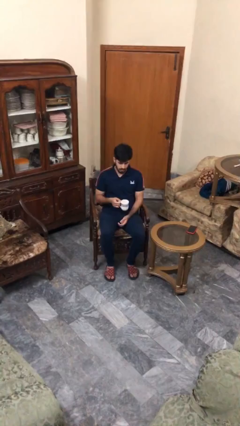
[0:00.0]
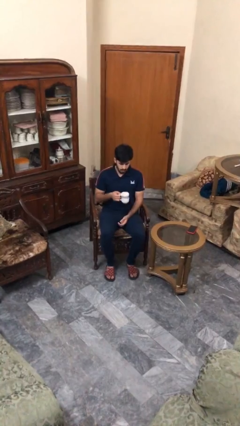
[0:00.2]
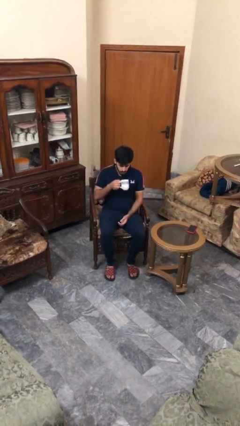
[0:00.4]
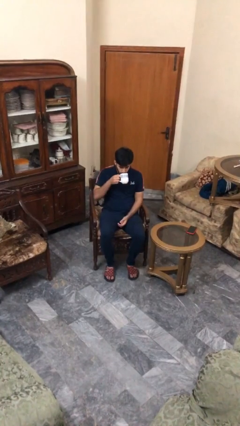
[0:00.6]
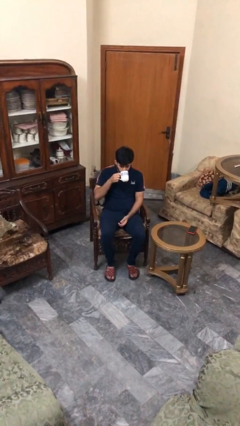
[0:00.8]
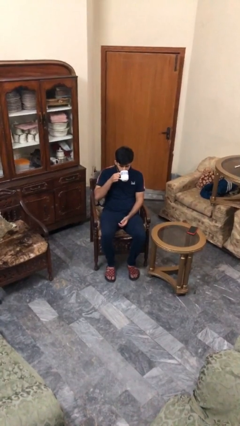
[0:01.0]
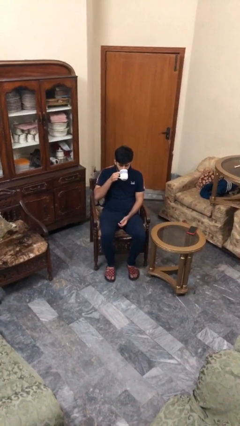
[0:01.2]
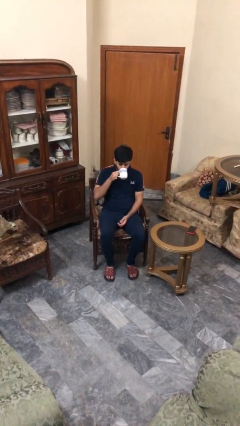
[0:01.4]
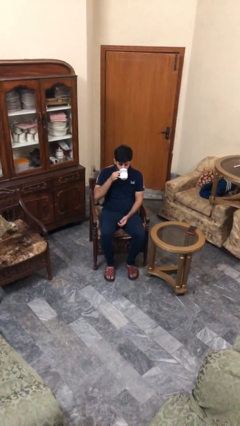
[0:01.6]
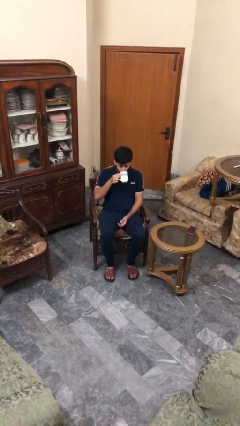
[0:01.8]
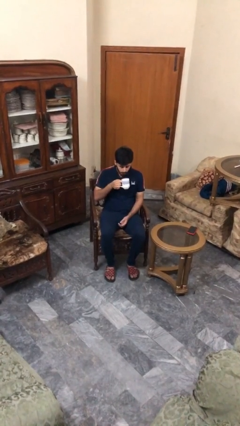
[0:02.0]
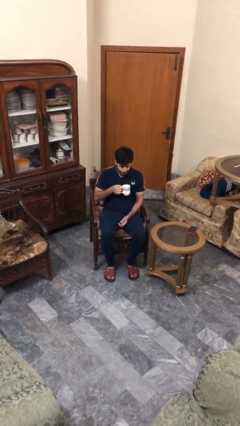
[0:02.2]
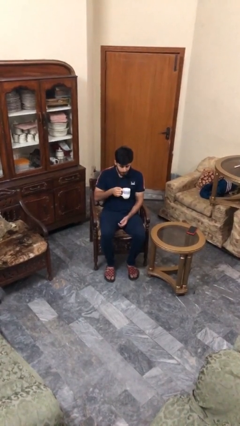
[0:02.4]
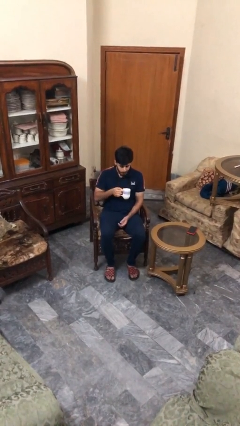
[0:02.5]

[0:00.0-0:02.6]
person drinks from mug

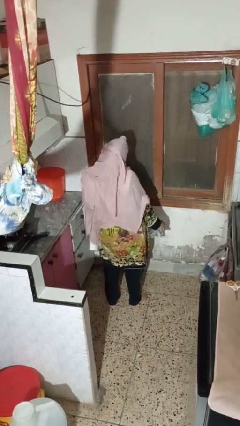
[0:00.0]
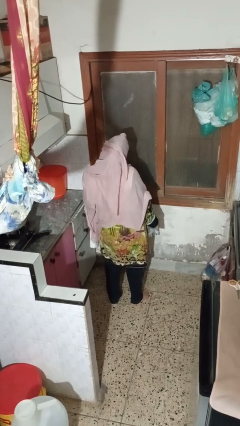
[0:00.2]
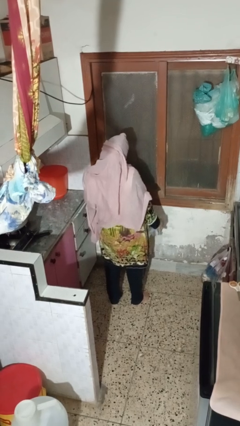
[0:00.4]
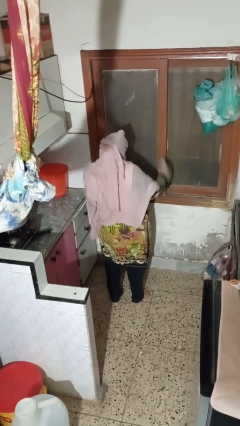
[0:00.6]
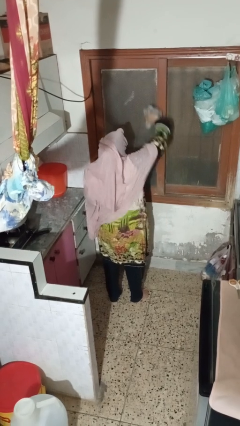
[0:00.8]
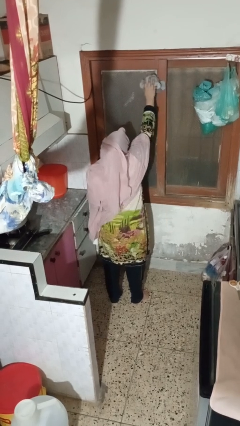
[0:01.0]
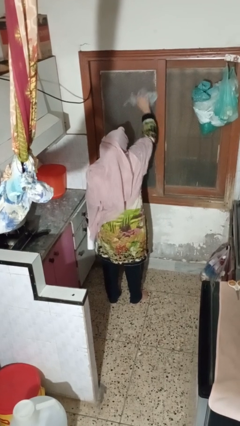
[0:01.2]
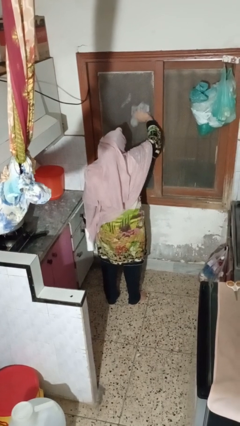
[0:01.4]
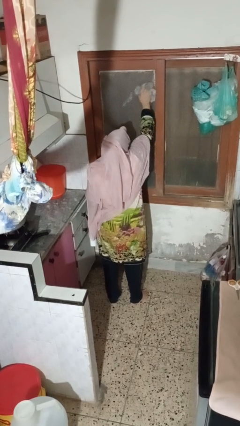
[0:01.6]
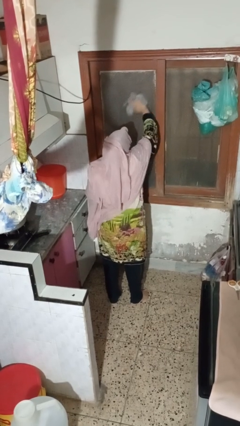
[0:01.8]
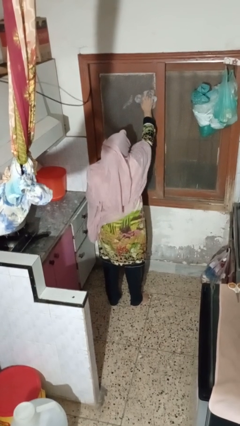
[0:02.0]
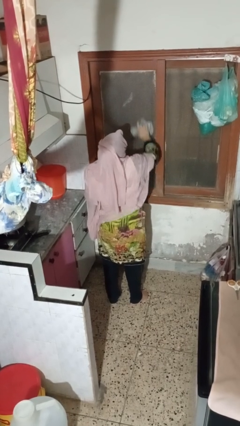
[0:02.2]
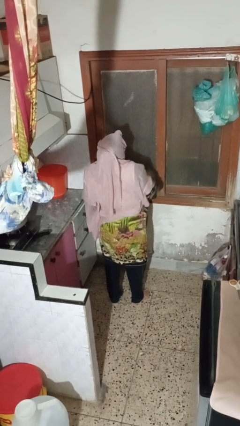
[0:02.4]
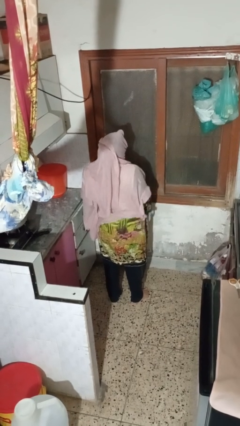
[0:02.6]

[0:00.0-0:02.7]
person washes window

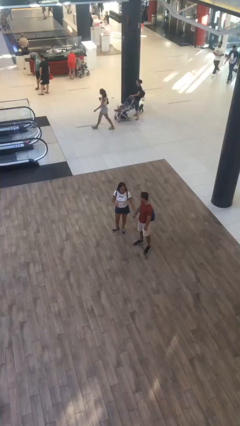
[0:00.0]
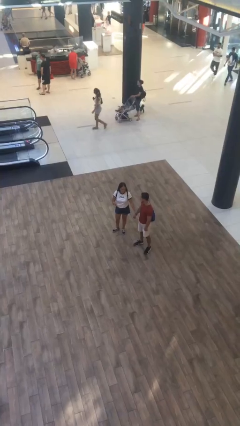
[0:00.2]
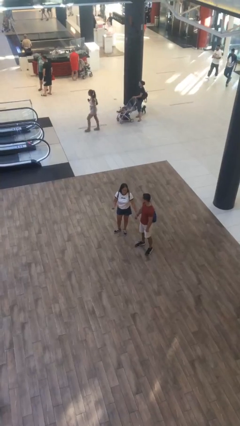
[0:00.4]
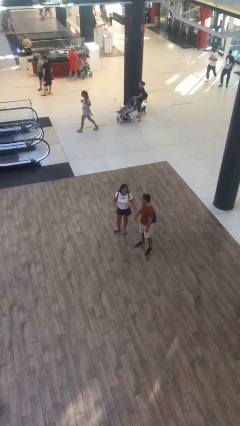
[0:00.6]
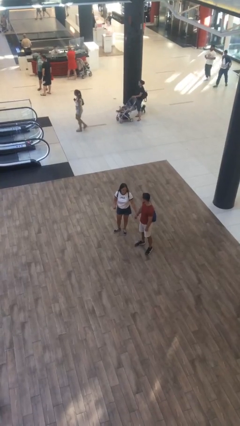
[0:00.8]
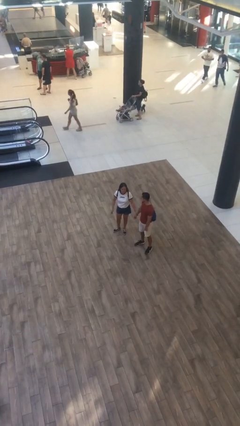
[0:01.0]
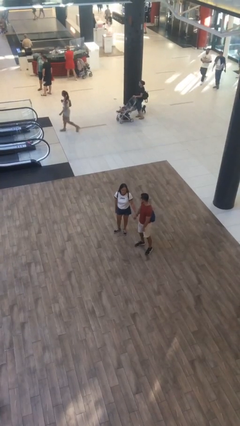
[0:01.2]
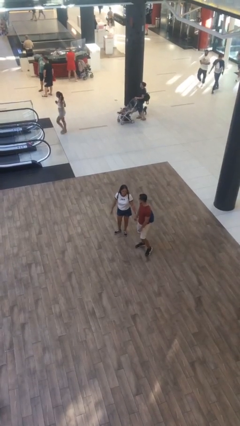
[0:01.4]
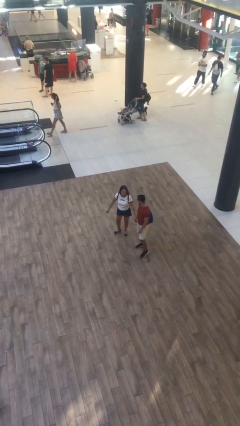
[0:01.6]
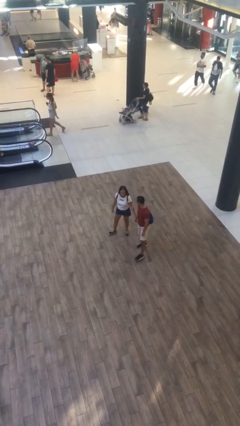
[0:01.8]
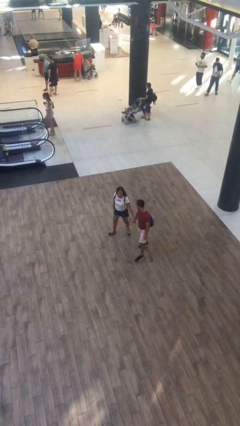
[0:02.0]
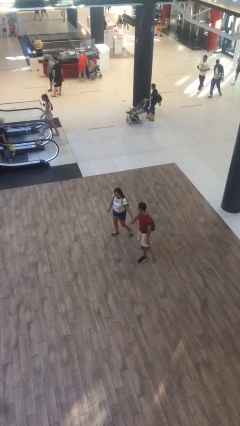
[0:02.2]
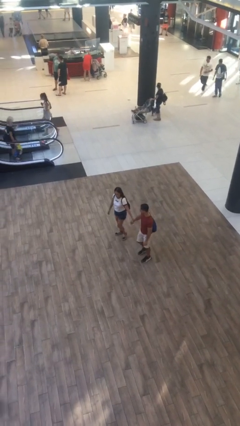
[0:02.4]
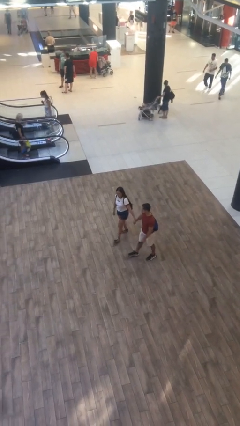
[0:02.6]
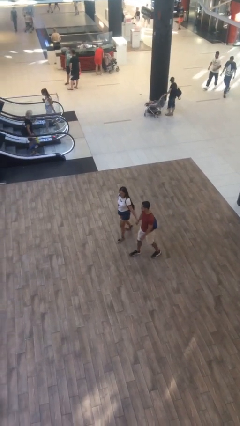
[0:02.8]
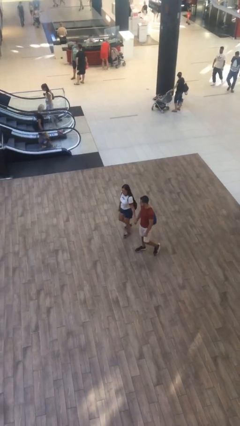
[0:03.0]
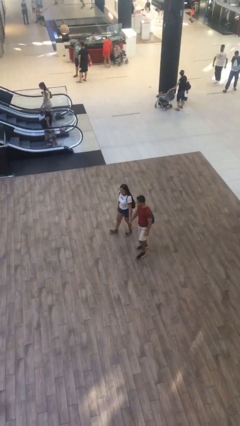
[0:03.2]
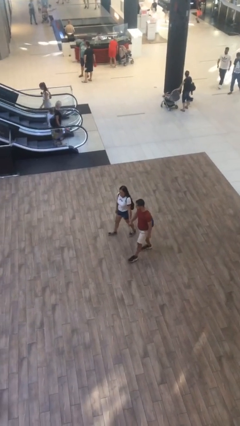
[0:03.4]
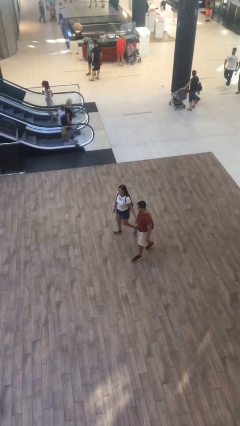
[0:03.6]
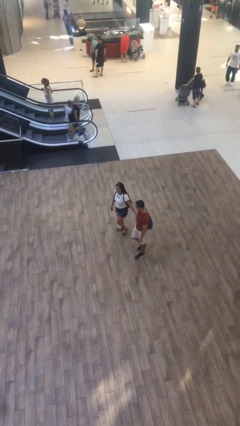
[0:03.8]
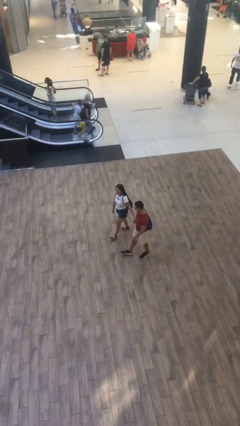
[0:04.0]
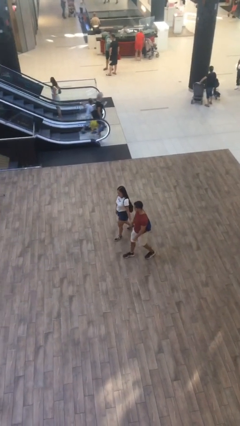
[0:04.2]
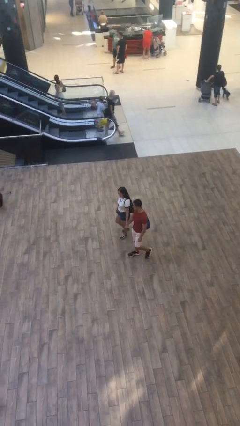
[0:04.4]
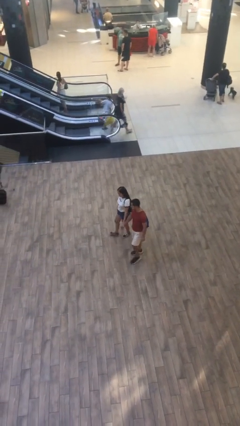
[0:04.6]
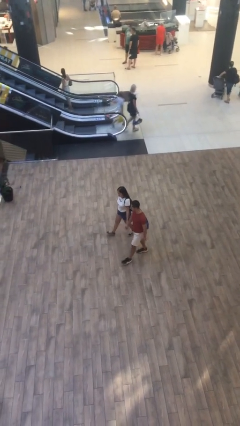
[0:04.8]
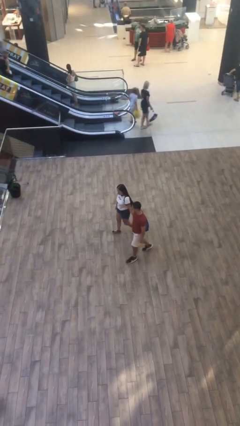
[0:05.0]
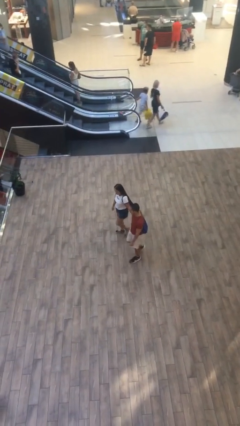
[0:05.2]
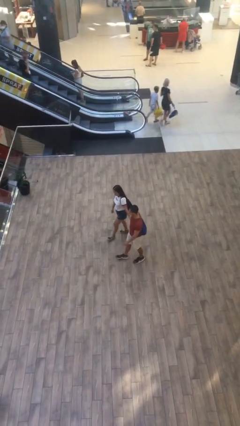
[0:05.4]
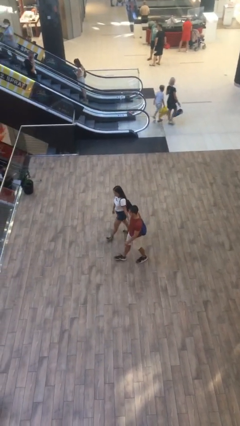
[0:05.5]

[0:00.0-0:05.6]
person holds hand

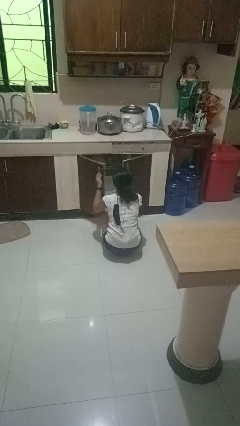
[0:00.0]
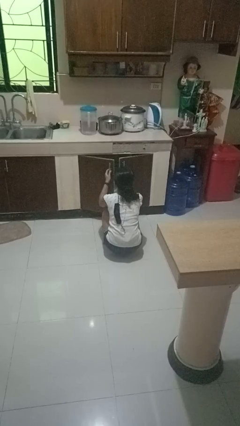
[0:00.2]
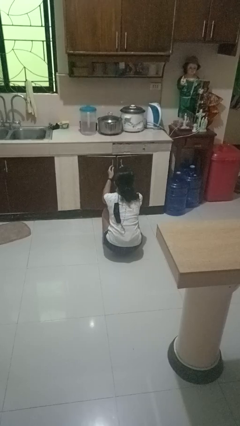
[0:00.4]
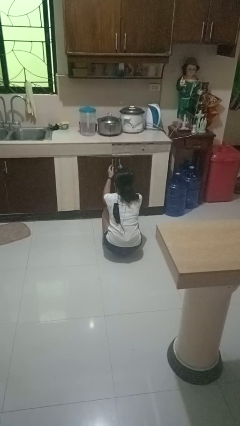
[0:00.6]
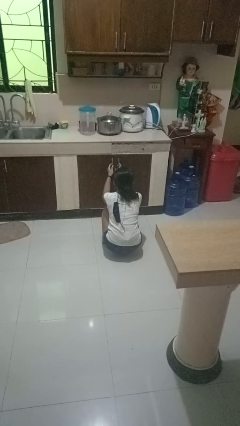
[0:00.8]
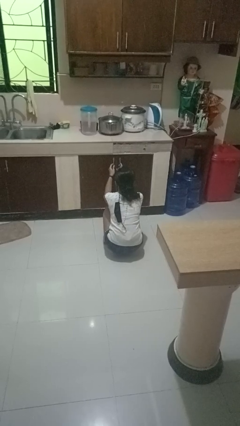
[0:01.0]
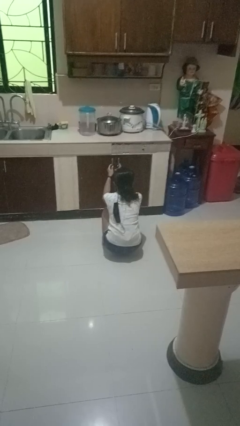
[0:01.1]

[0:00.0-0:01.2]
person closes dishwasher

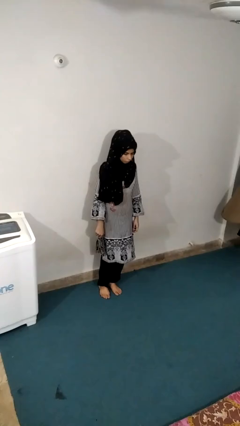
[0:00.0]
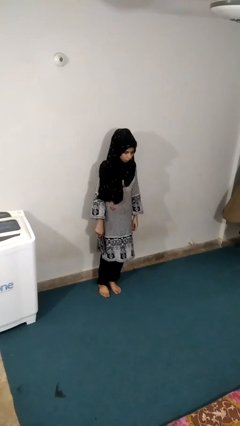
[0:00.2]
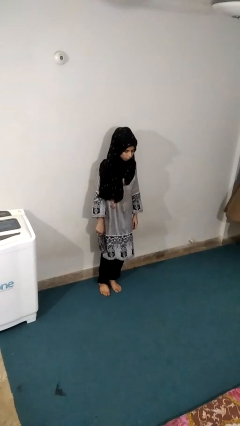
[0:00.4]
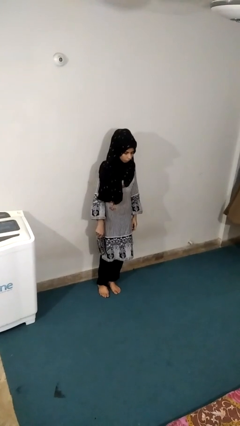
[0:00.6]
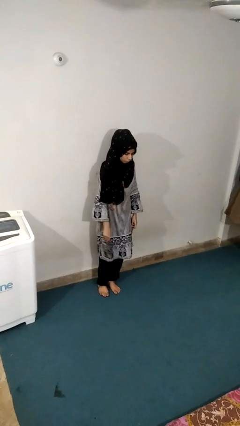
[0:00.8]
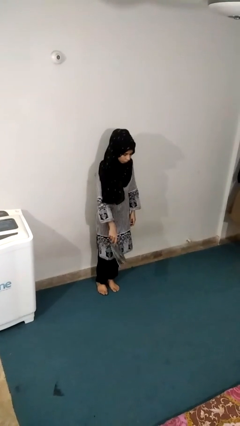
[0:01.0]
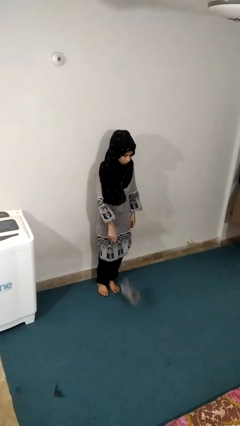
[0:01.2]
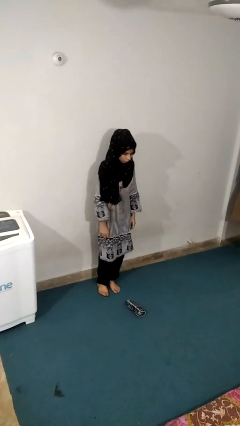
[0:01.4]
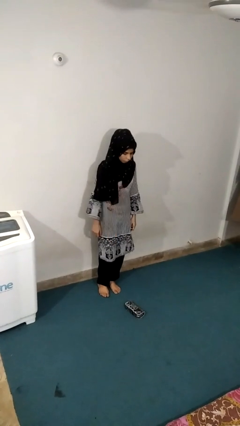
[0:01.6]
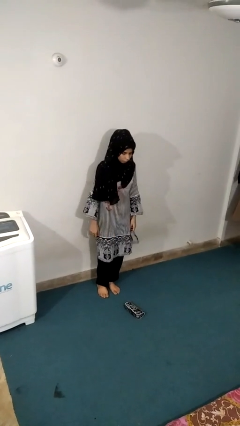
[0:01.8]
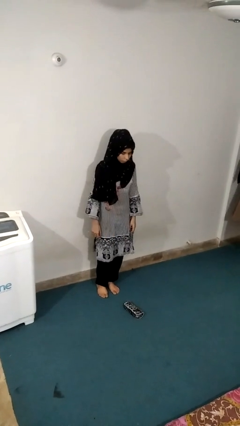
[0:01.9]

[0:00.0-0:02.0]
person throws object to ground

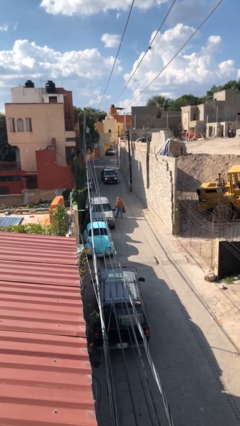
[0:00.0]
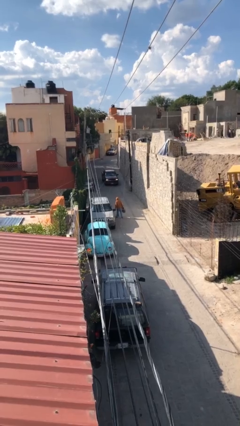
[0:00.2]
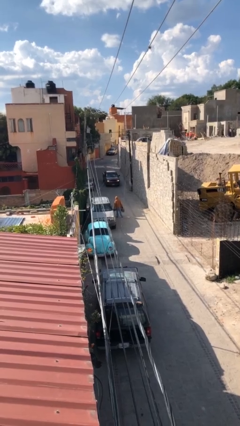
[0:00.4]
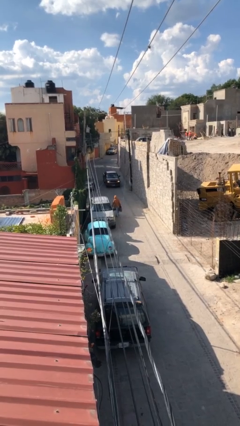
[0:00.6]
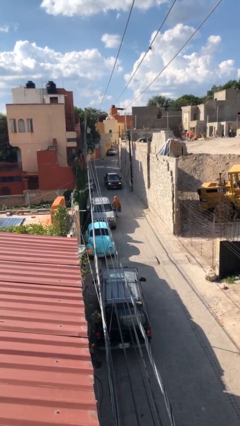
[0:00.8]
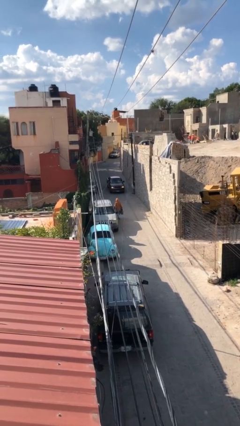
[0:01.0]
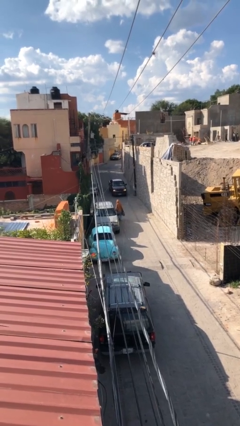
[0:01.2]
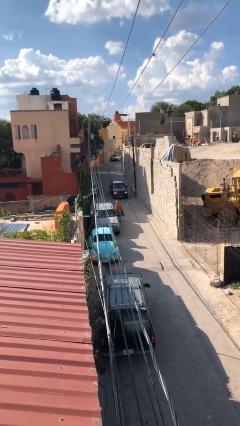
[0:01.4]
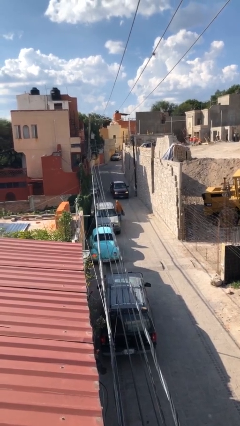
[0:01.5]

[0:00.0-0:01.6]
person closes car door

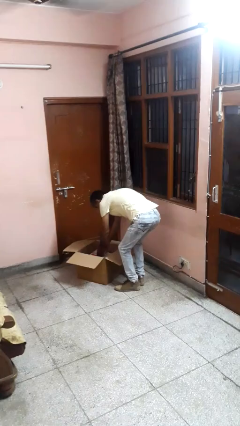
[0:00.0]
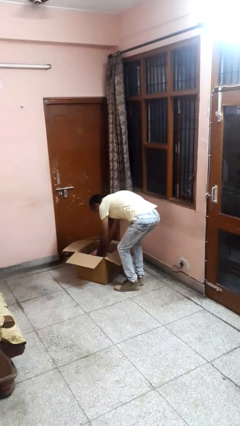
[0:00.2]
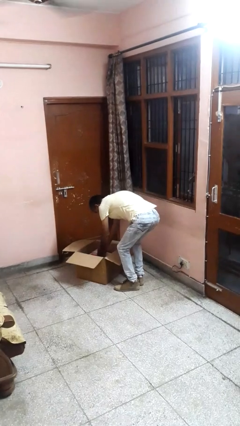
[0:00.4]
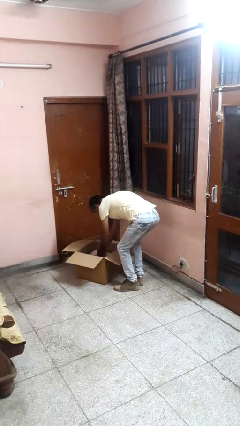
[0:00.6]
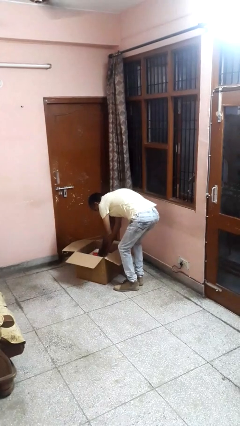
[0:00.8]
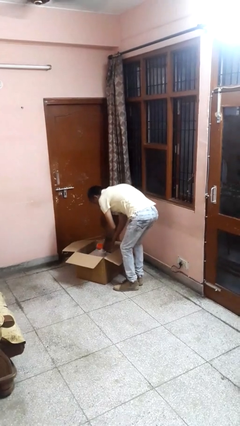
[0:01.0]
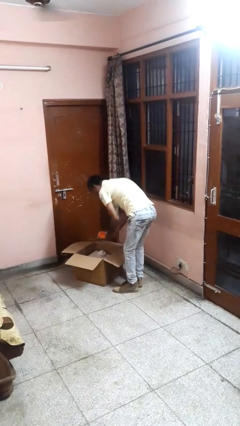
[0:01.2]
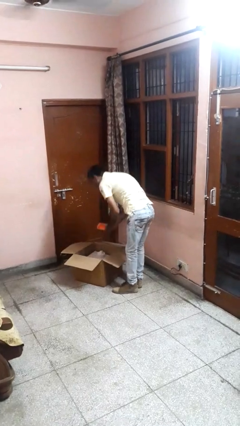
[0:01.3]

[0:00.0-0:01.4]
person takes object from box
